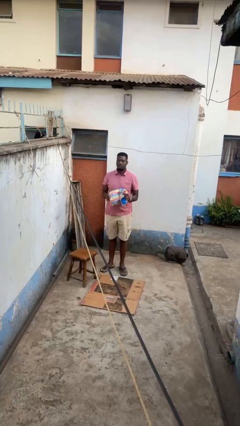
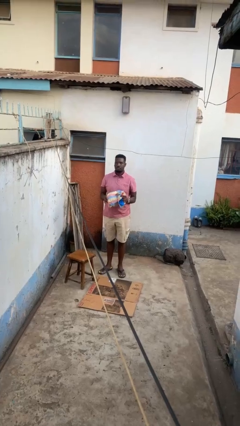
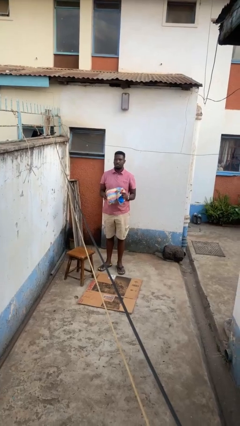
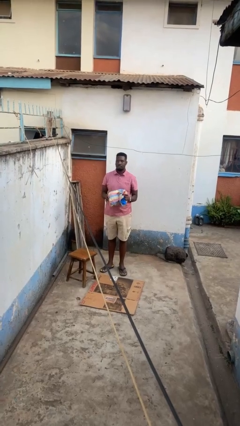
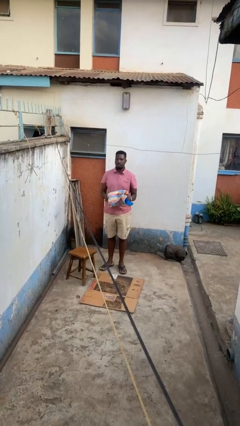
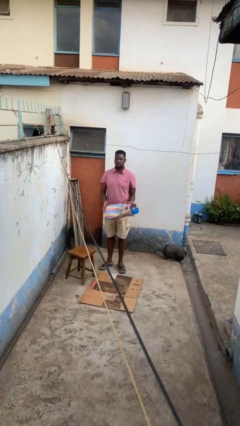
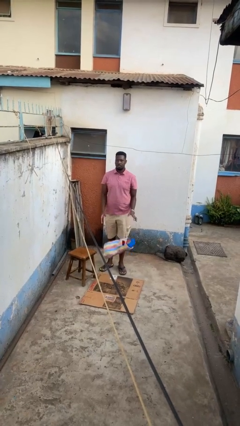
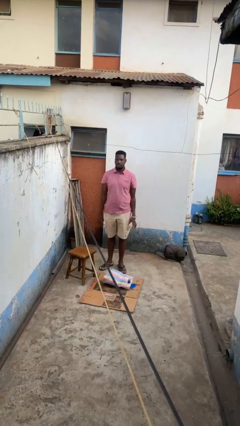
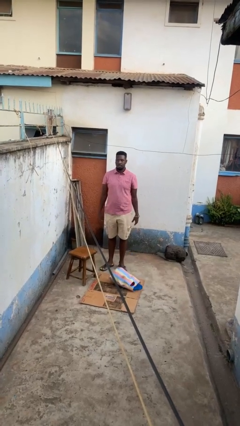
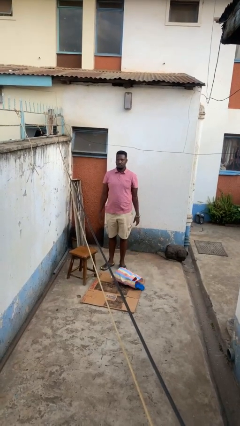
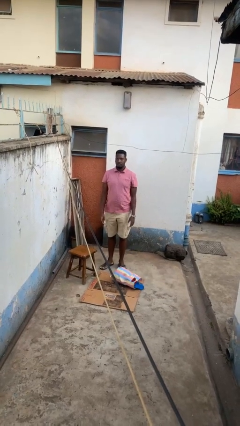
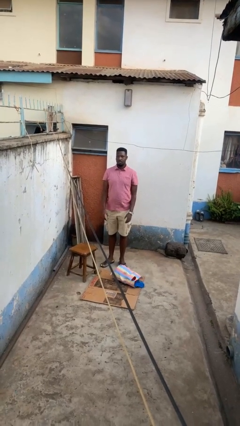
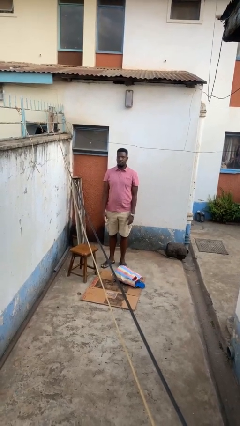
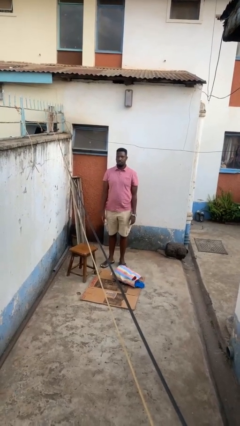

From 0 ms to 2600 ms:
person drops object

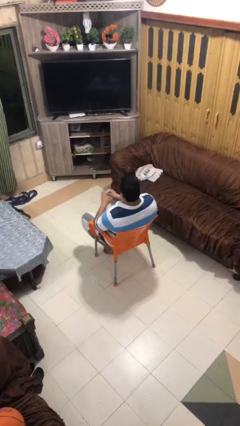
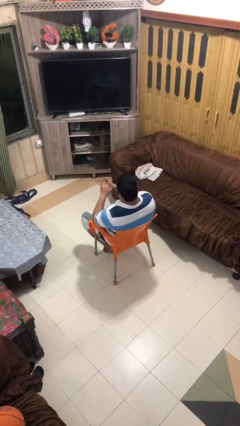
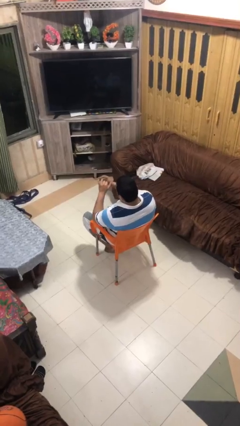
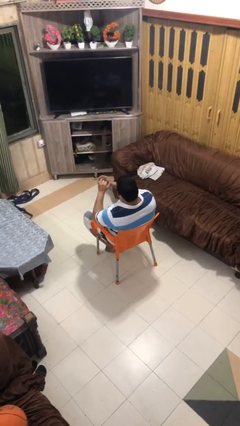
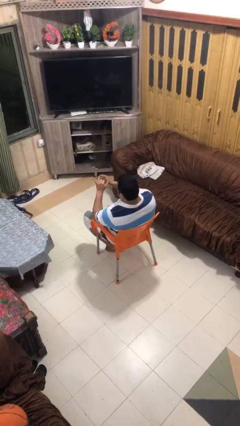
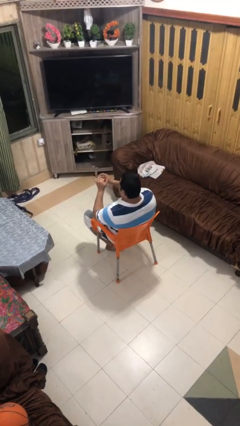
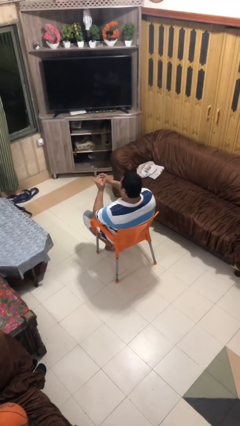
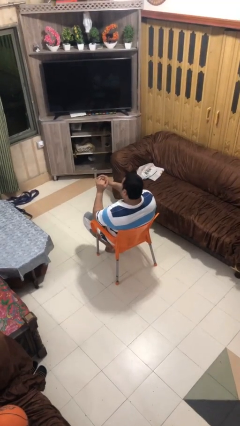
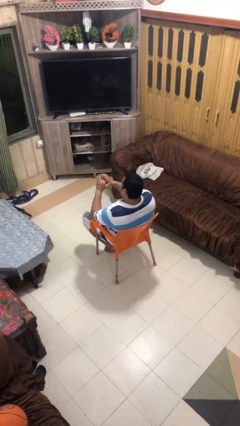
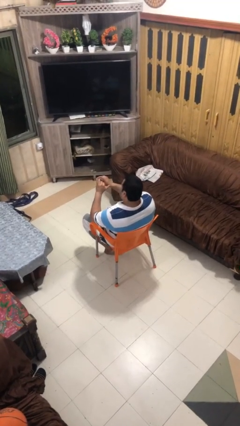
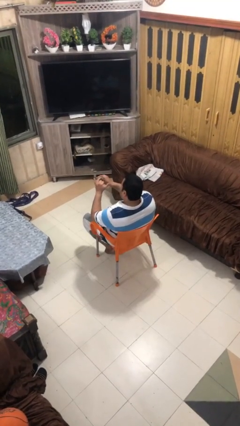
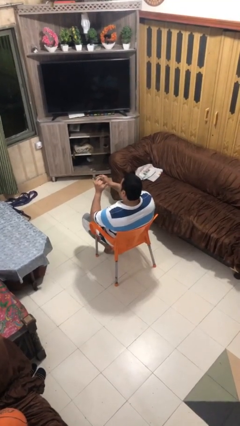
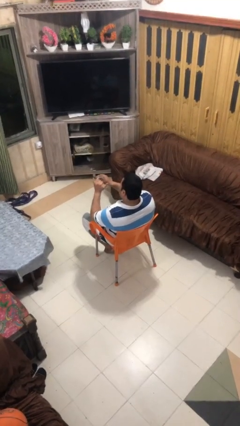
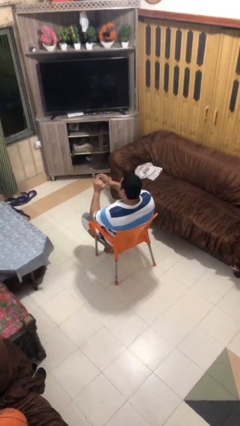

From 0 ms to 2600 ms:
person files fingernails

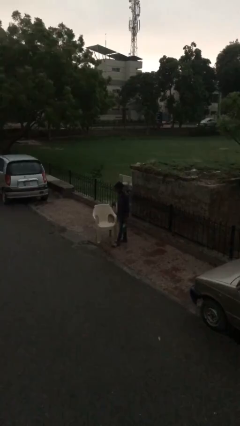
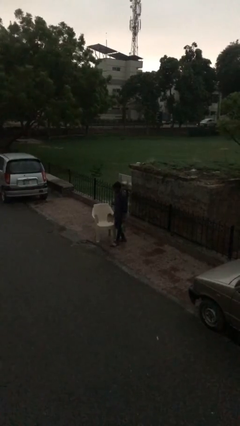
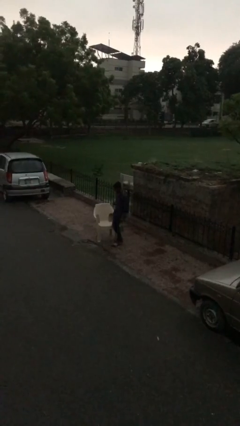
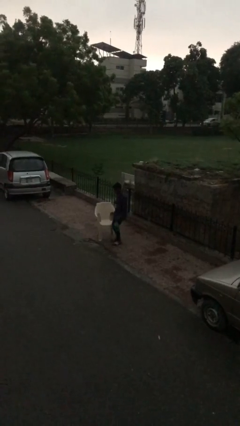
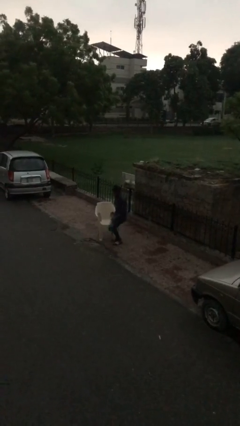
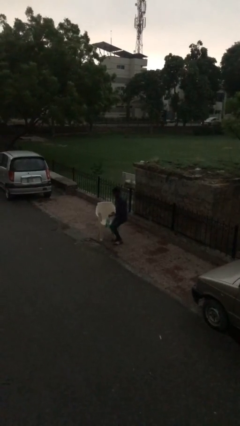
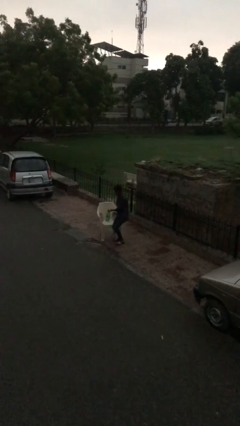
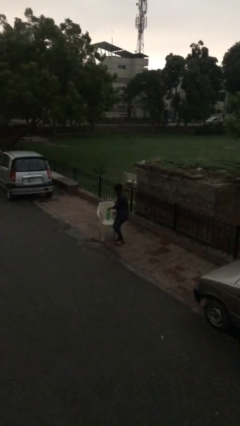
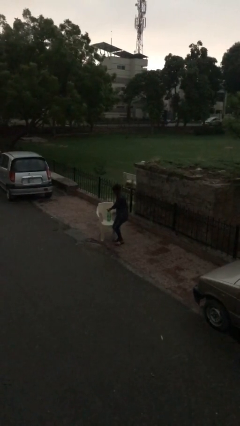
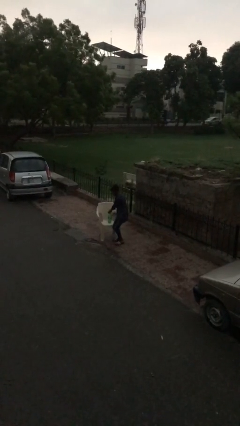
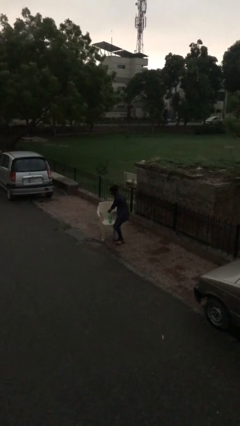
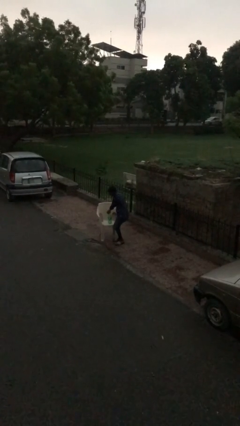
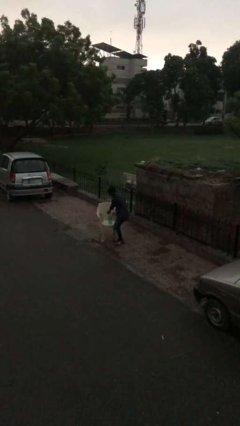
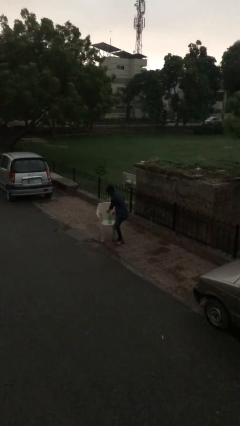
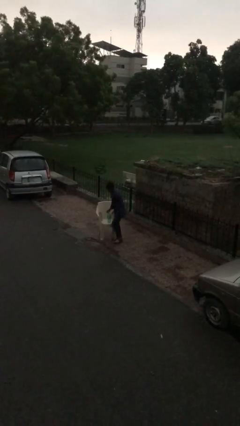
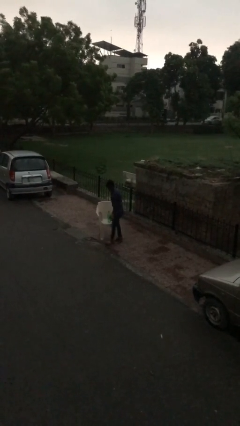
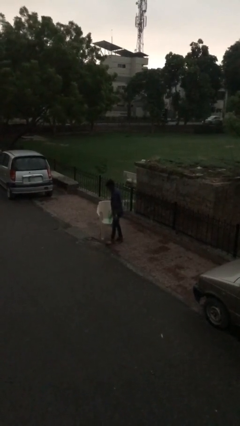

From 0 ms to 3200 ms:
person puts down object on table

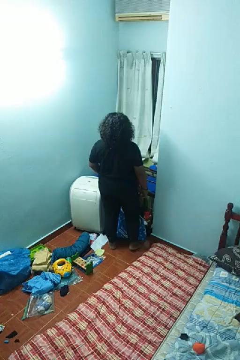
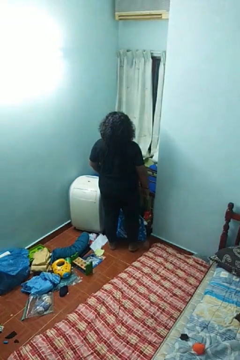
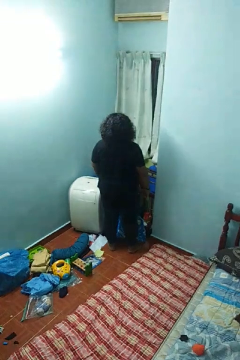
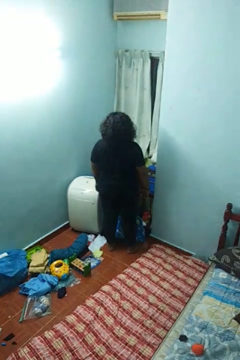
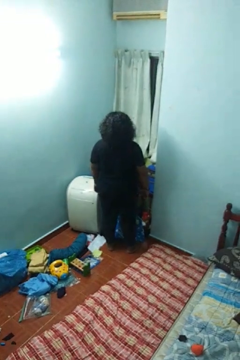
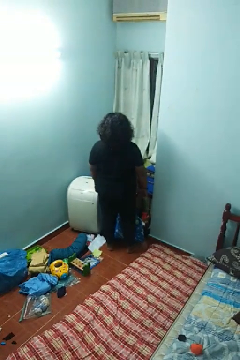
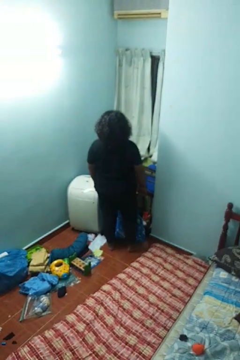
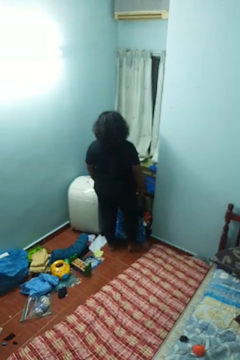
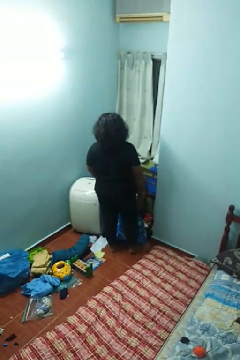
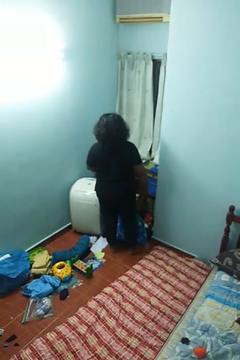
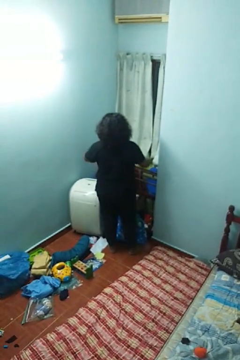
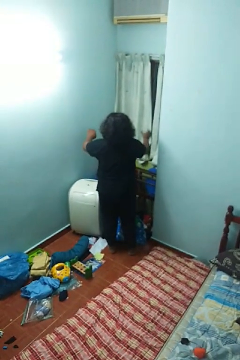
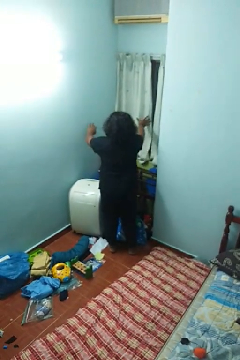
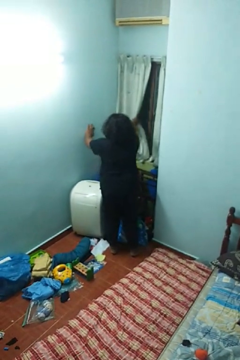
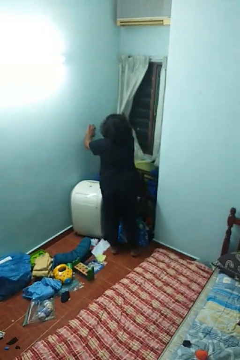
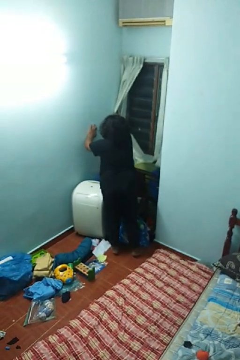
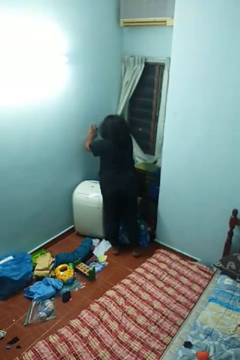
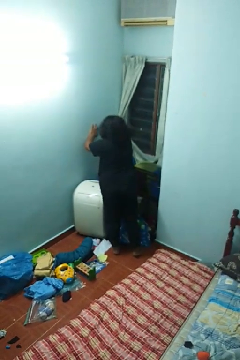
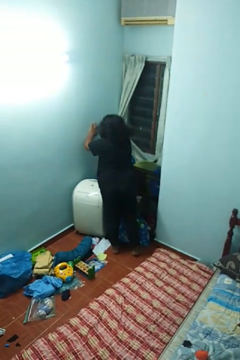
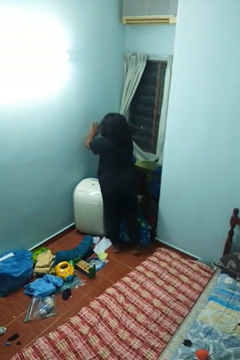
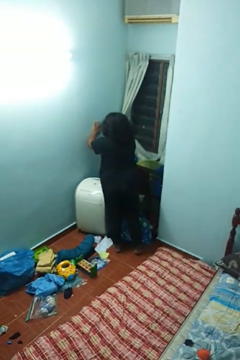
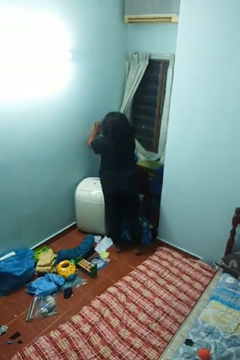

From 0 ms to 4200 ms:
person opens curtains

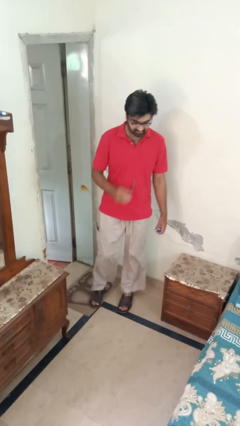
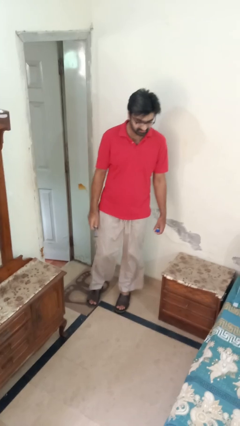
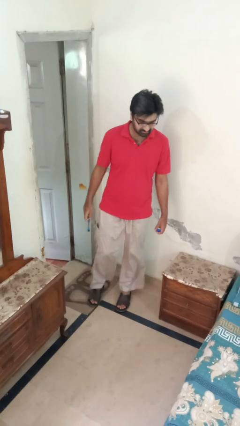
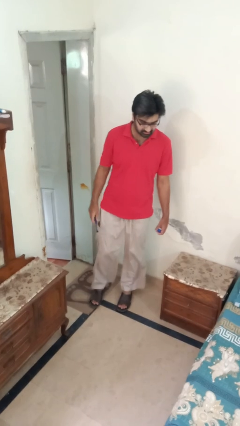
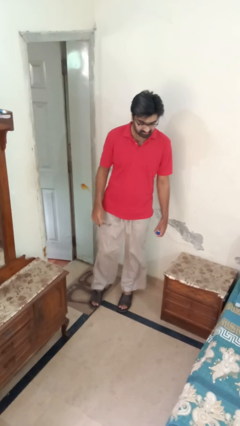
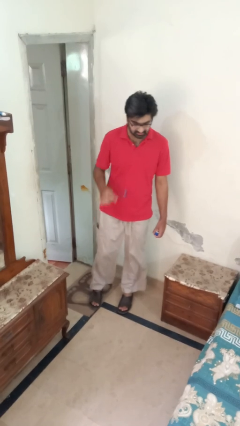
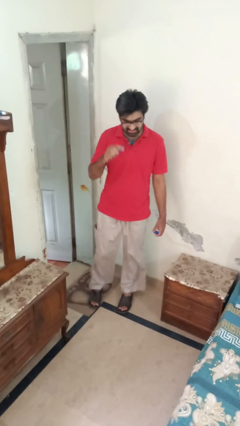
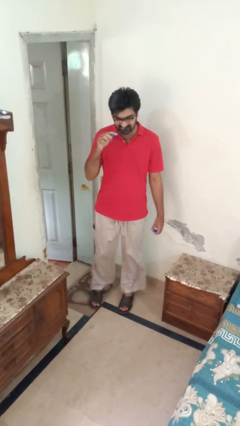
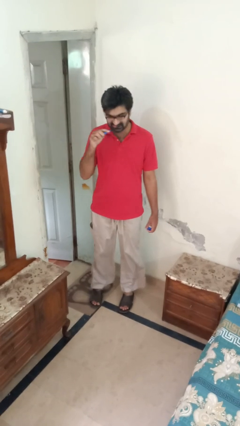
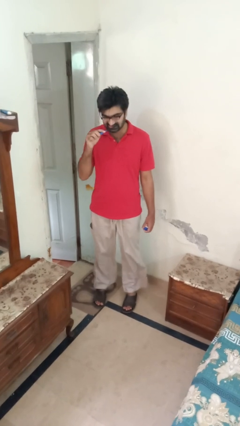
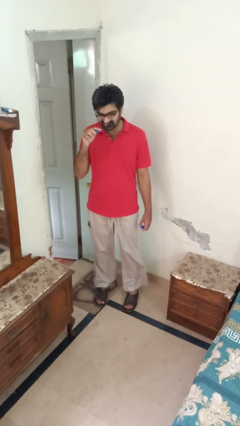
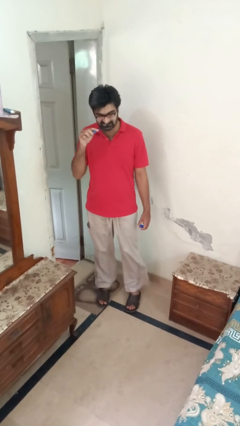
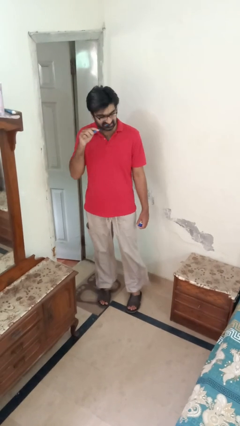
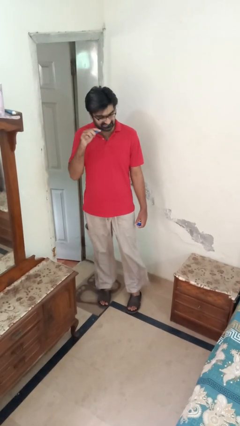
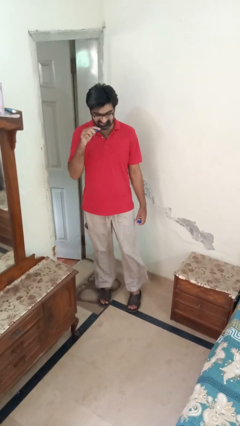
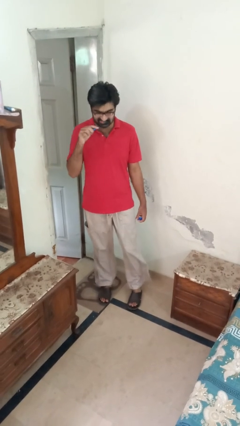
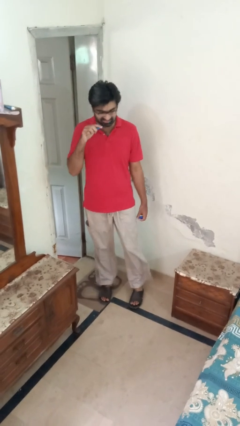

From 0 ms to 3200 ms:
person brushes teeth

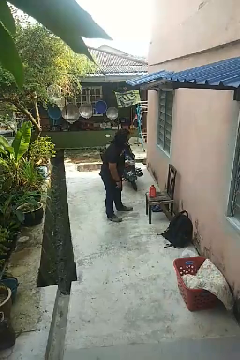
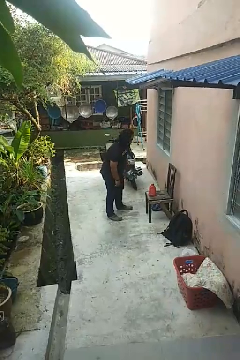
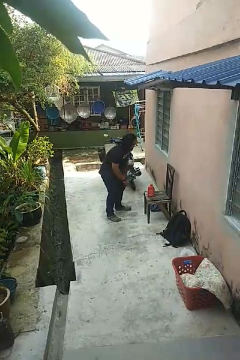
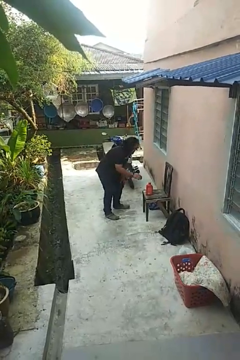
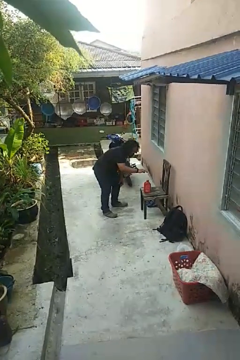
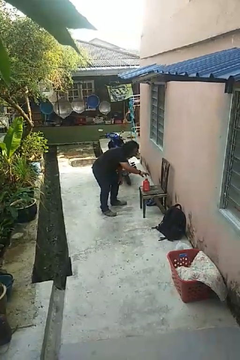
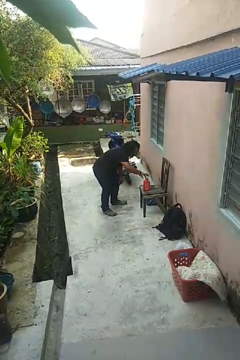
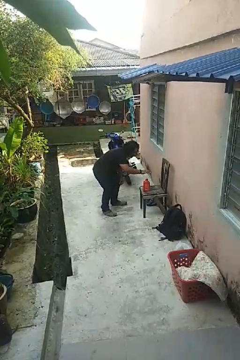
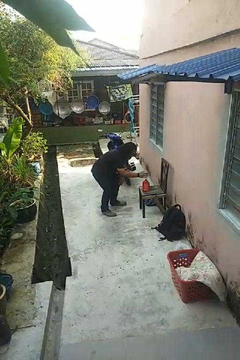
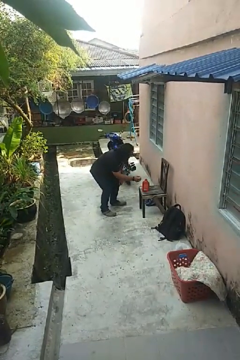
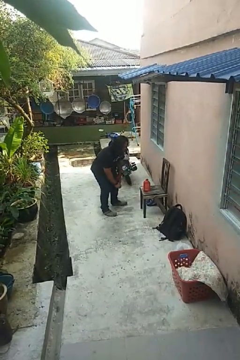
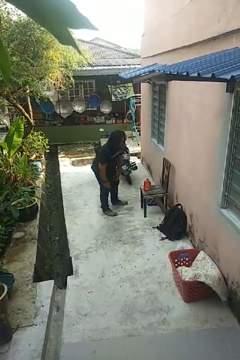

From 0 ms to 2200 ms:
person waves hand over object

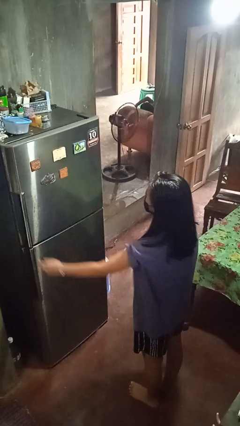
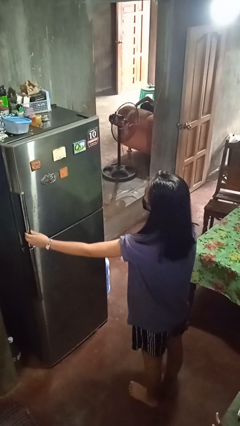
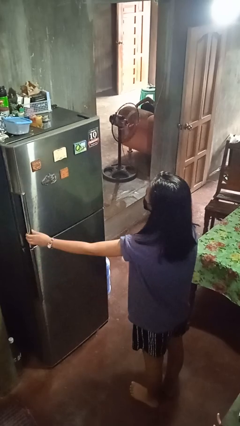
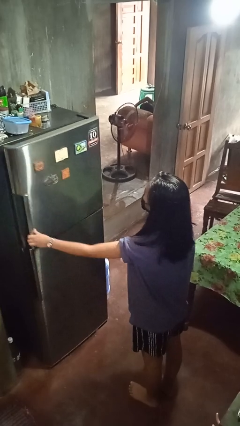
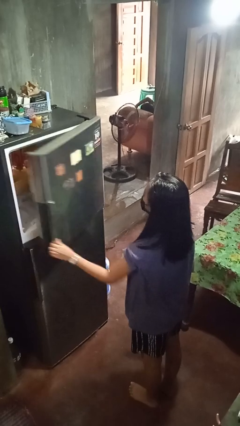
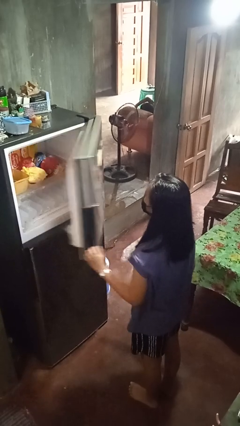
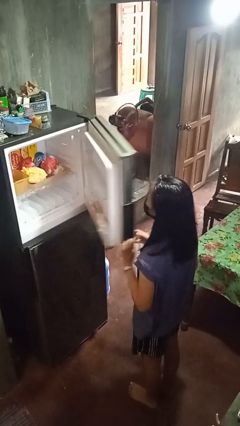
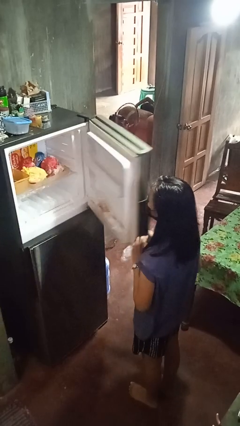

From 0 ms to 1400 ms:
person opens refrigerator
